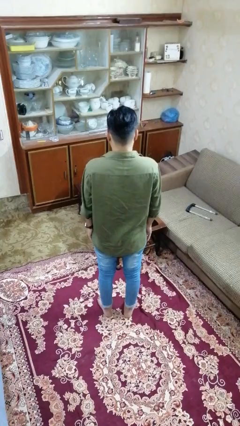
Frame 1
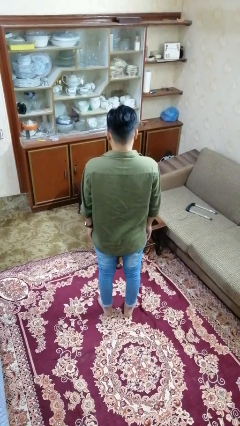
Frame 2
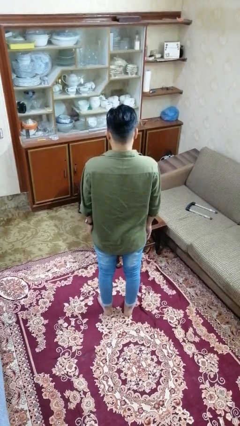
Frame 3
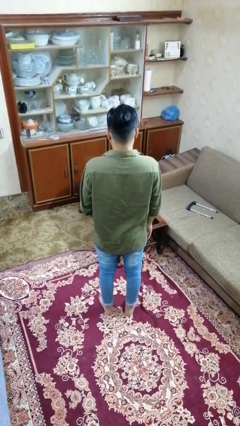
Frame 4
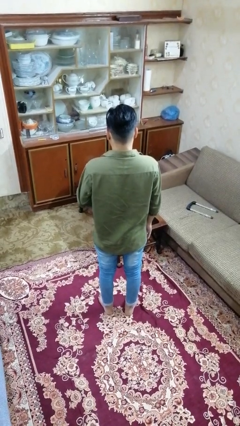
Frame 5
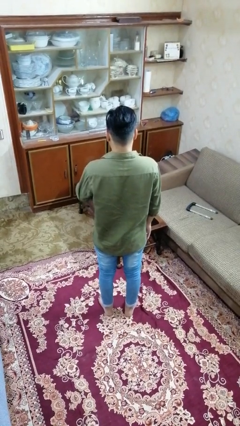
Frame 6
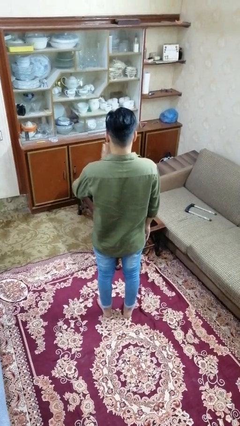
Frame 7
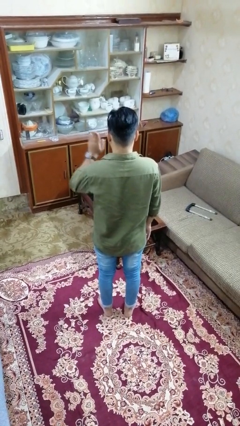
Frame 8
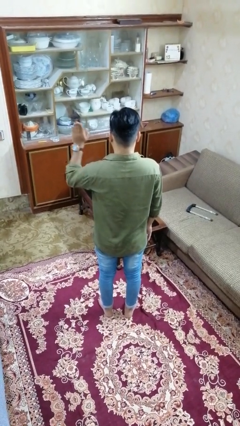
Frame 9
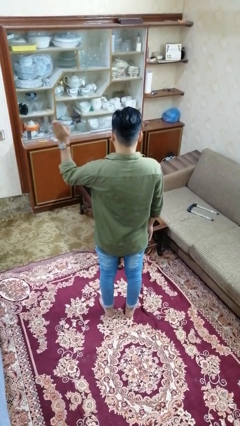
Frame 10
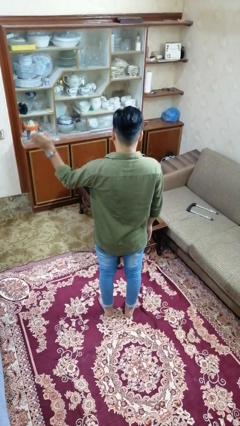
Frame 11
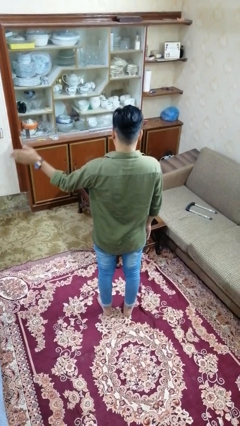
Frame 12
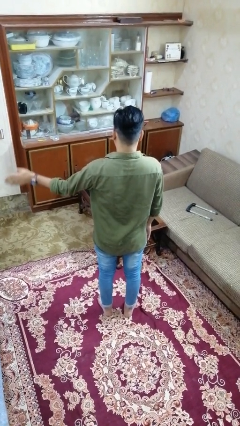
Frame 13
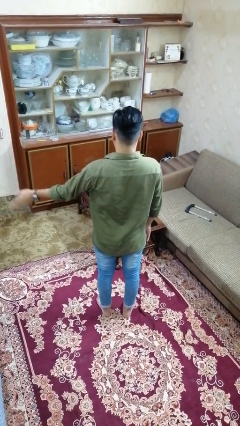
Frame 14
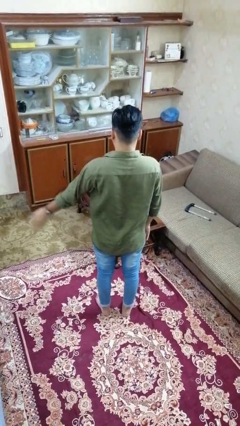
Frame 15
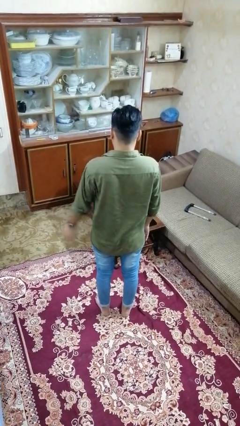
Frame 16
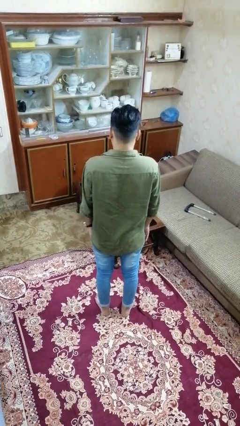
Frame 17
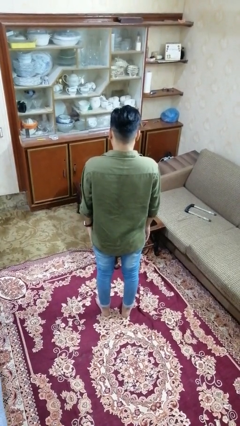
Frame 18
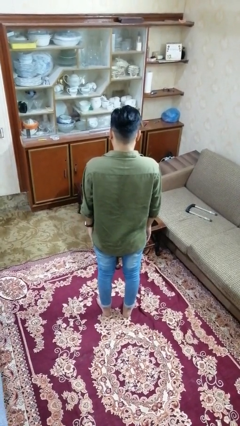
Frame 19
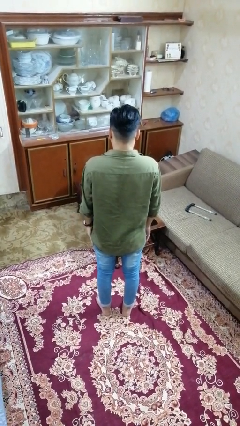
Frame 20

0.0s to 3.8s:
person gestures swipe left

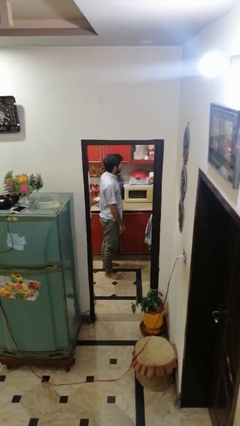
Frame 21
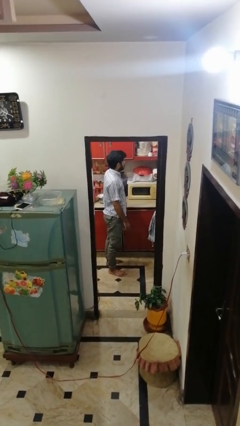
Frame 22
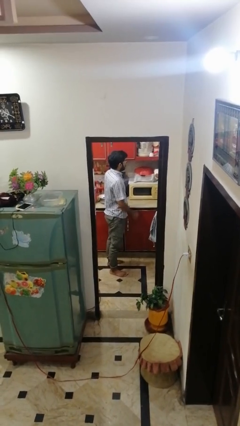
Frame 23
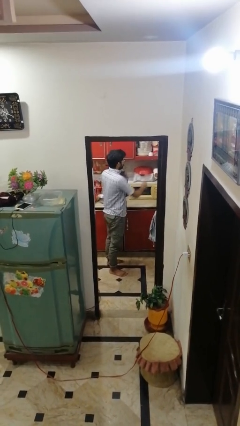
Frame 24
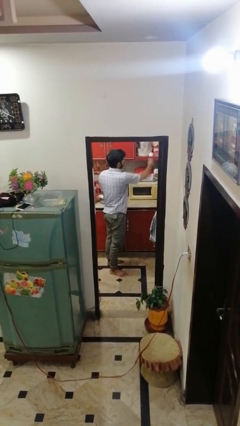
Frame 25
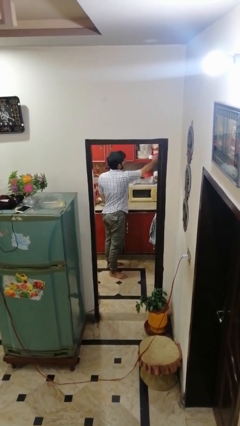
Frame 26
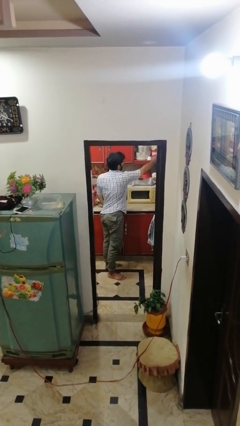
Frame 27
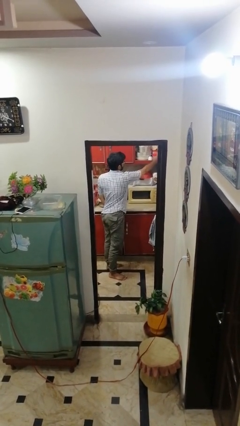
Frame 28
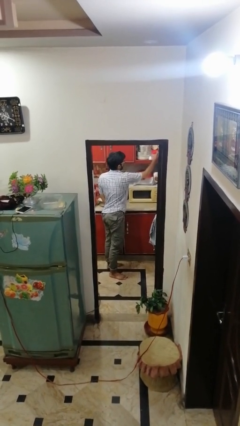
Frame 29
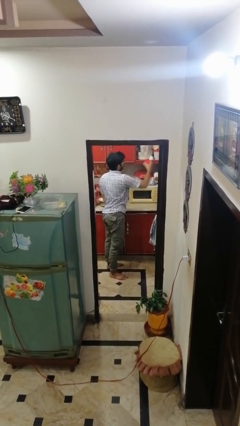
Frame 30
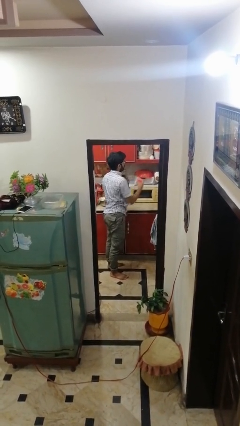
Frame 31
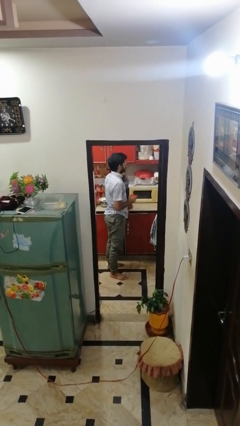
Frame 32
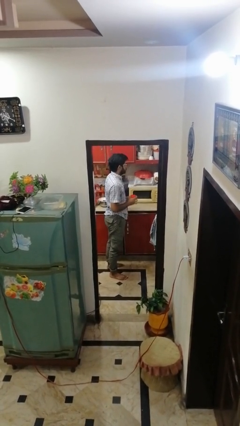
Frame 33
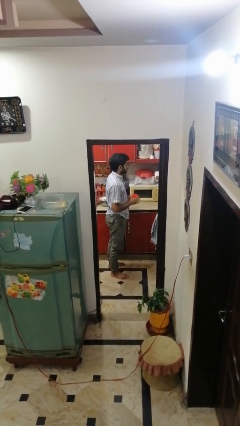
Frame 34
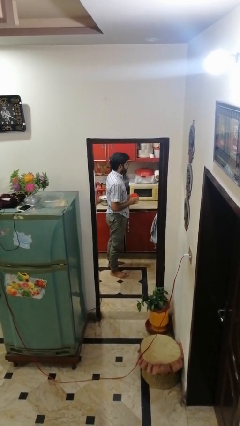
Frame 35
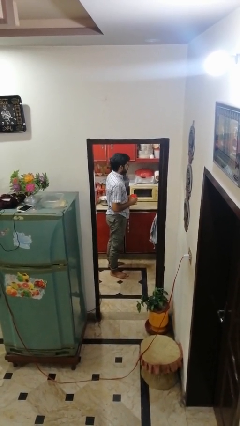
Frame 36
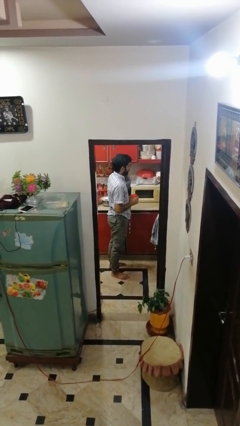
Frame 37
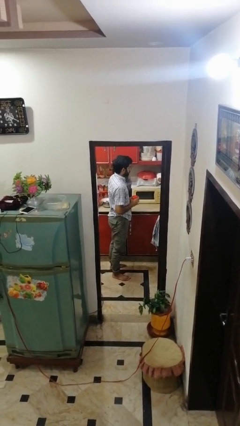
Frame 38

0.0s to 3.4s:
person picks up object from cabinet

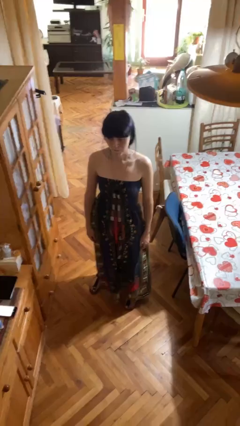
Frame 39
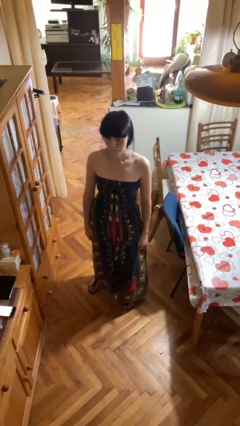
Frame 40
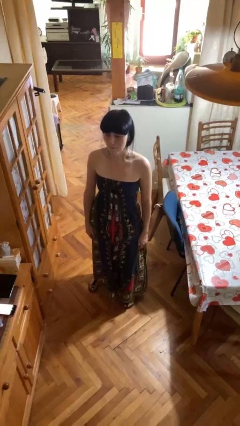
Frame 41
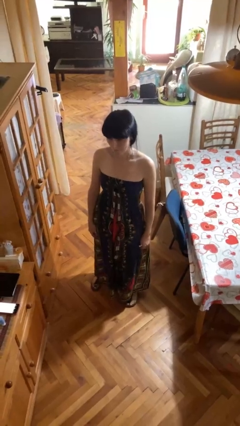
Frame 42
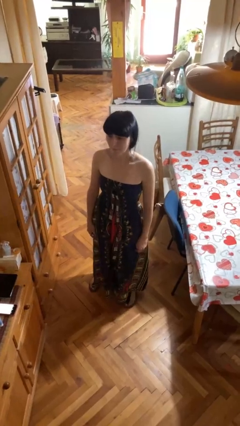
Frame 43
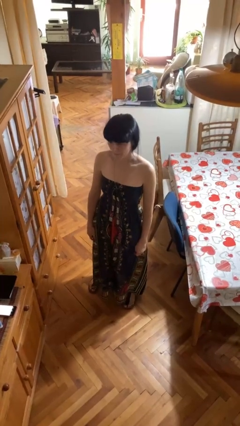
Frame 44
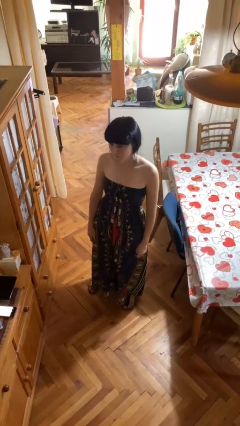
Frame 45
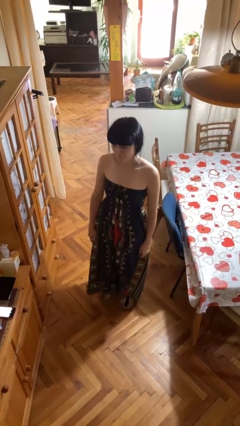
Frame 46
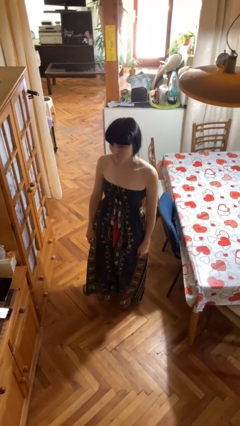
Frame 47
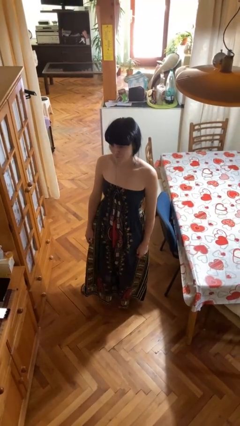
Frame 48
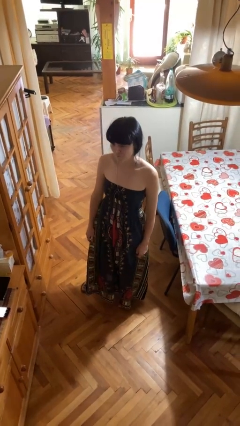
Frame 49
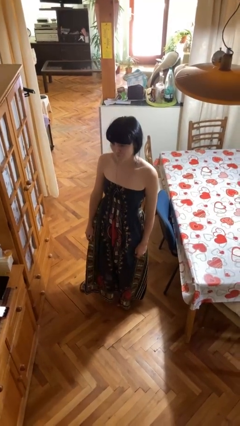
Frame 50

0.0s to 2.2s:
person nods head

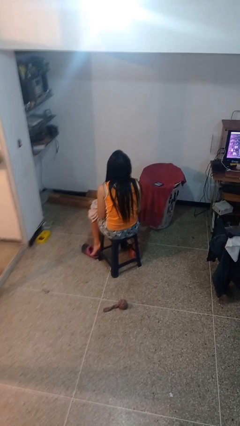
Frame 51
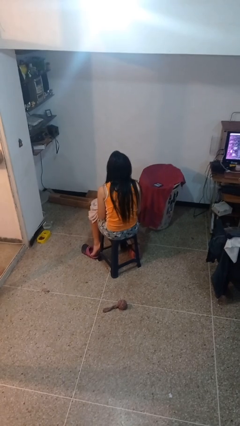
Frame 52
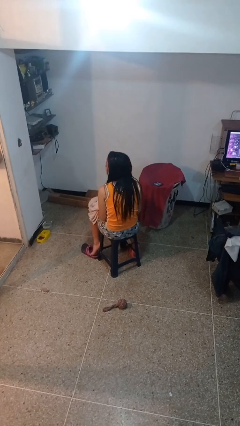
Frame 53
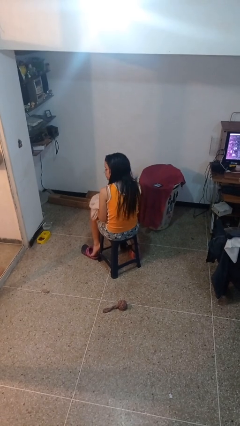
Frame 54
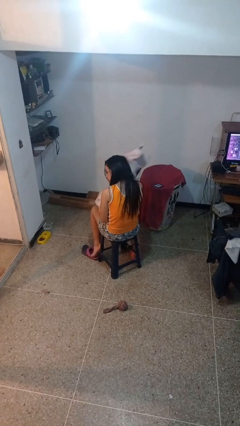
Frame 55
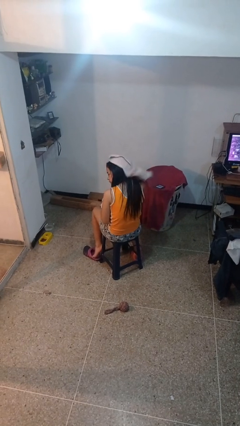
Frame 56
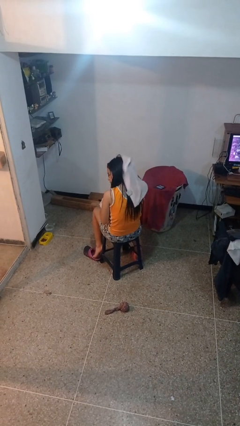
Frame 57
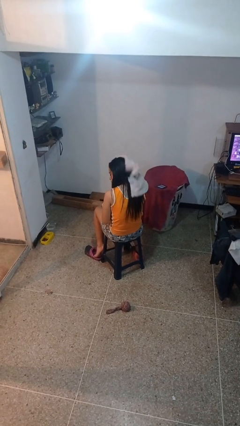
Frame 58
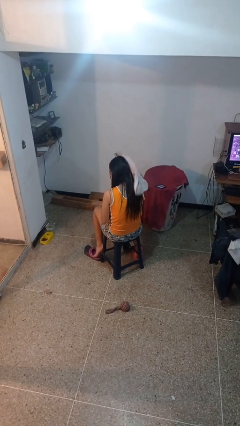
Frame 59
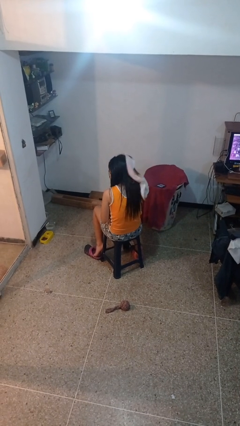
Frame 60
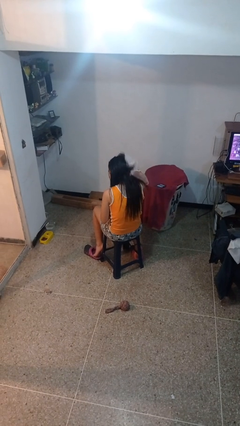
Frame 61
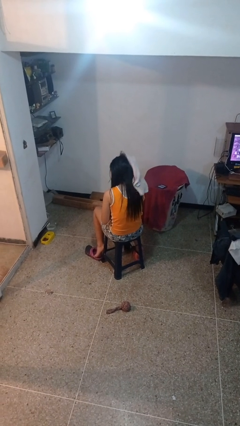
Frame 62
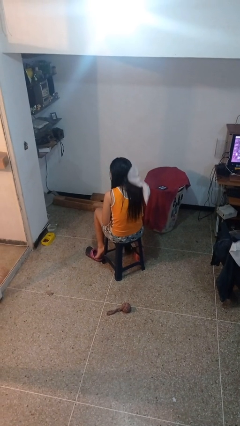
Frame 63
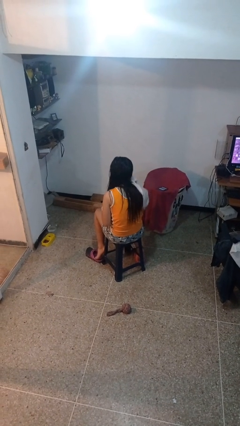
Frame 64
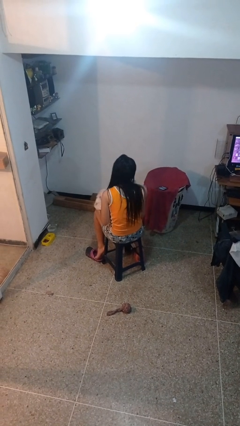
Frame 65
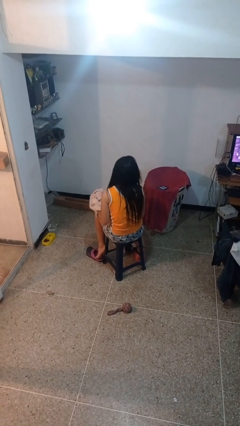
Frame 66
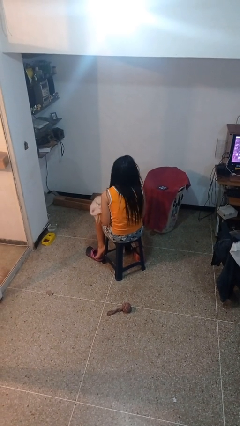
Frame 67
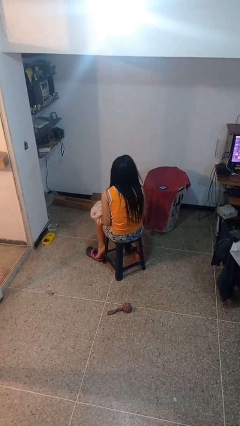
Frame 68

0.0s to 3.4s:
person dries hair with towel

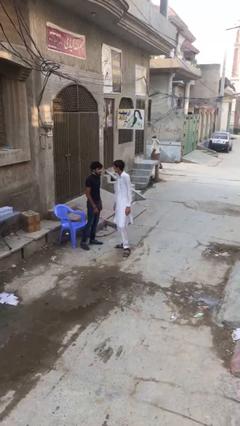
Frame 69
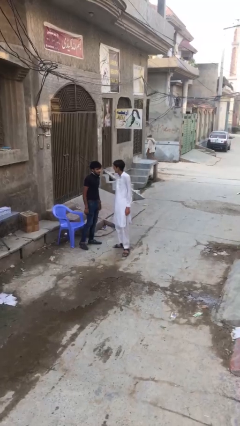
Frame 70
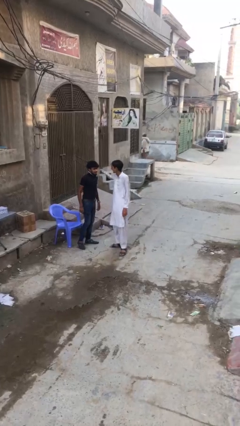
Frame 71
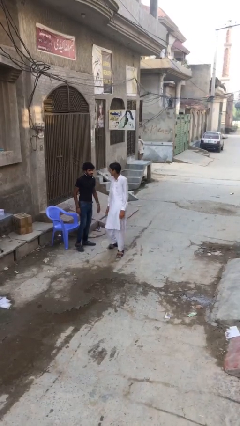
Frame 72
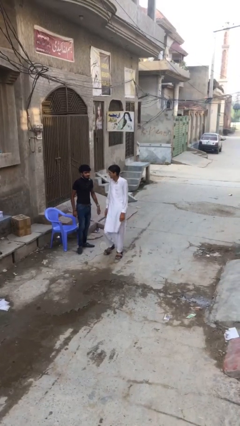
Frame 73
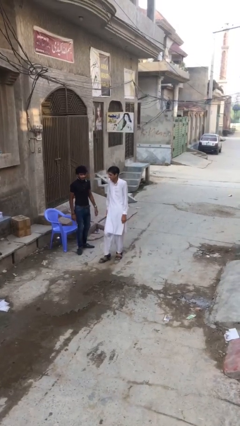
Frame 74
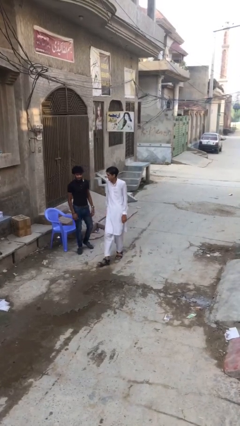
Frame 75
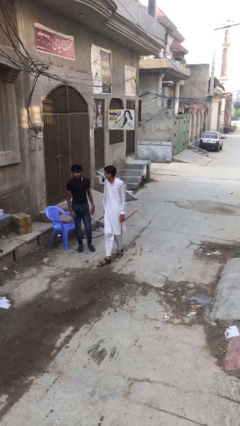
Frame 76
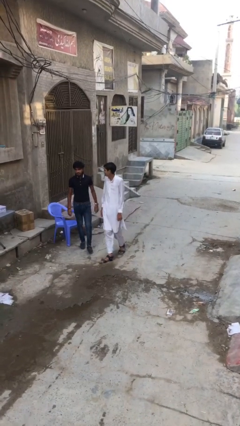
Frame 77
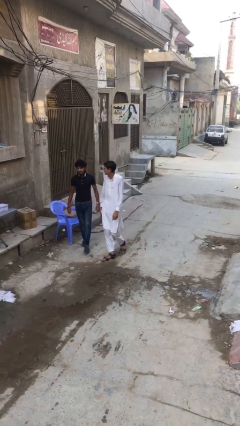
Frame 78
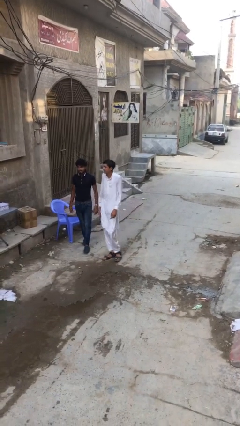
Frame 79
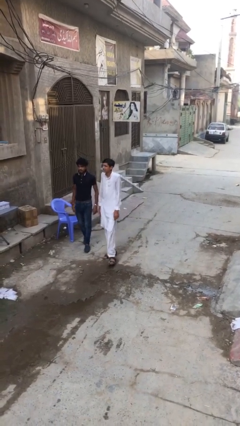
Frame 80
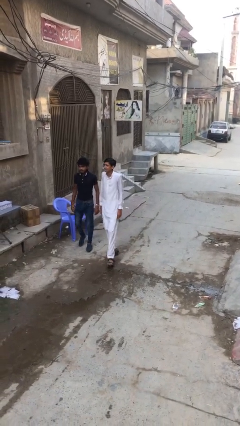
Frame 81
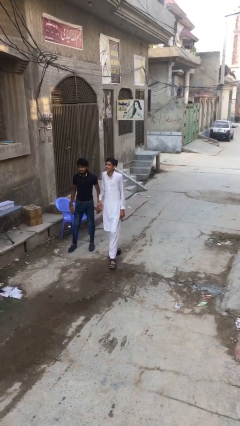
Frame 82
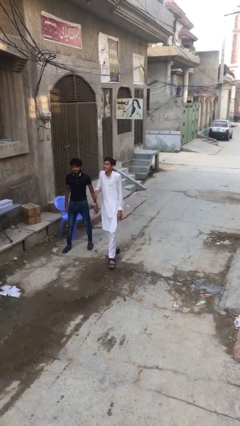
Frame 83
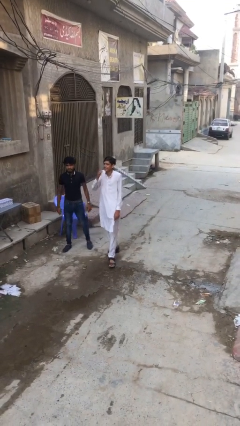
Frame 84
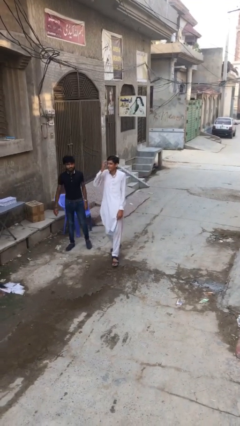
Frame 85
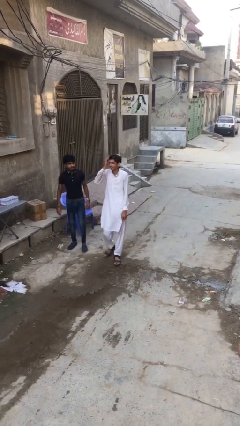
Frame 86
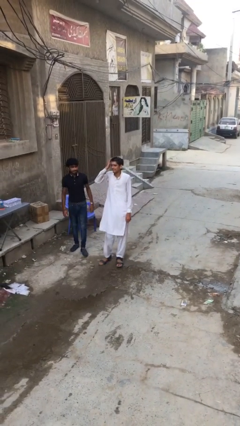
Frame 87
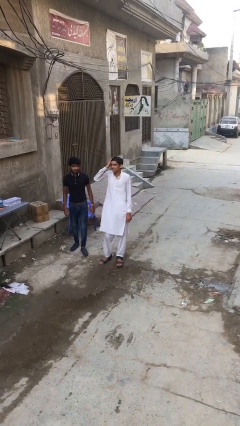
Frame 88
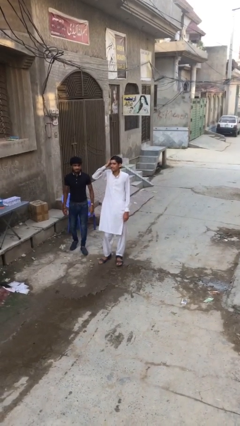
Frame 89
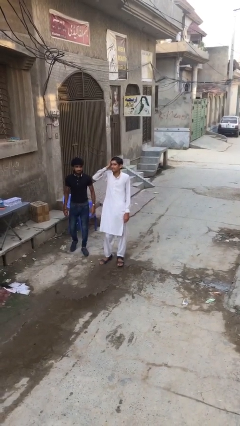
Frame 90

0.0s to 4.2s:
person talks to person

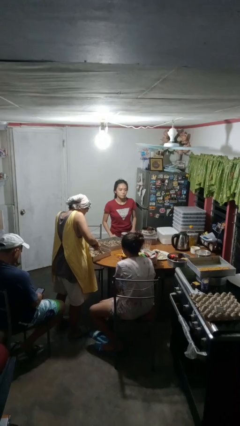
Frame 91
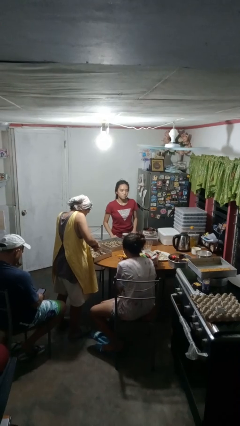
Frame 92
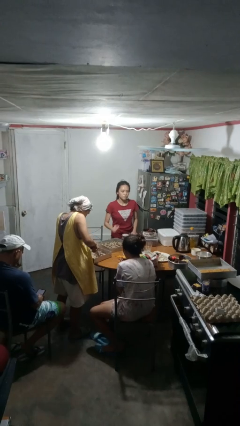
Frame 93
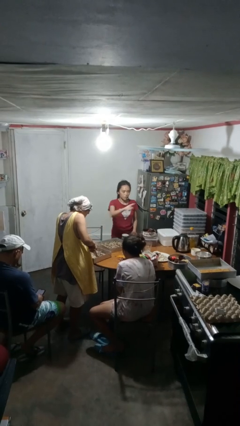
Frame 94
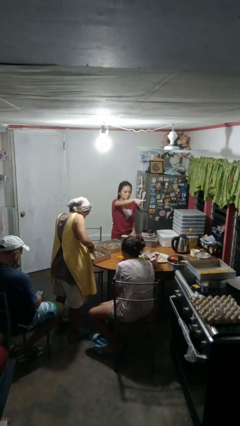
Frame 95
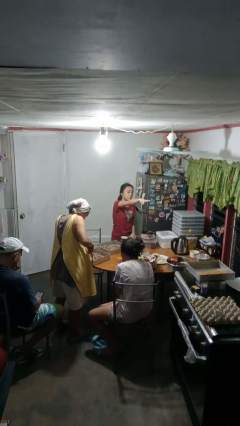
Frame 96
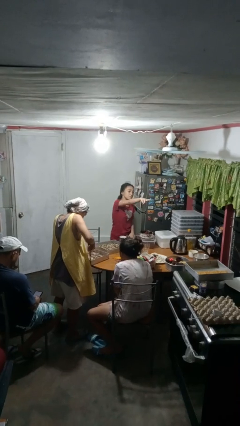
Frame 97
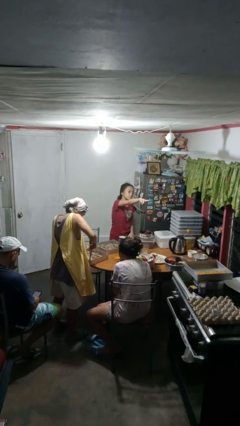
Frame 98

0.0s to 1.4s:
person points at person
